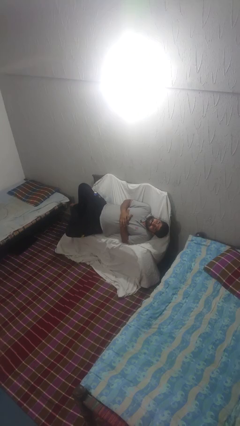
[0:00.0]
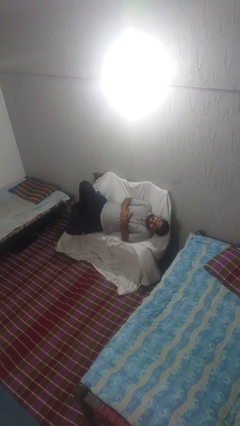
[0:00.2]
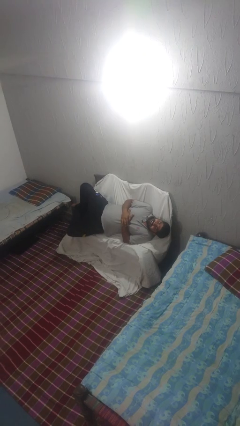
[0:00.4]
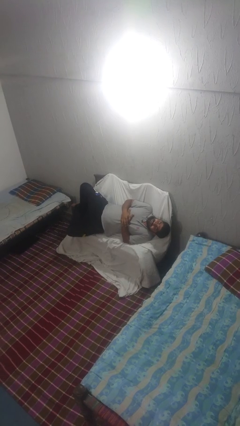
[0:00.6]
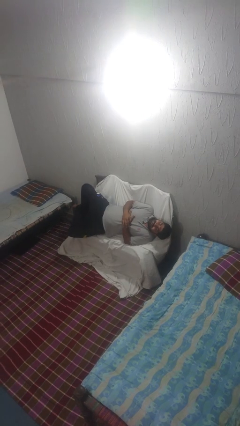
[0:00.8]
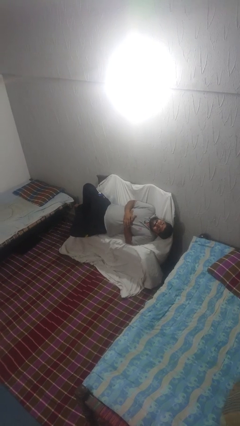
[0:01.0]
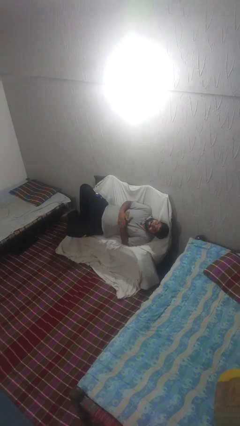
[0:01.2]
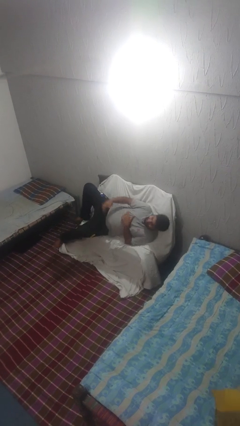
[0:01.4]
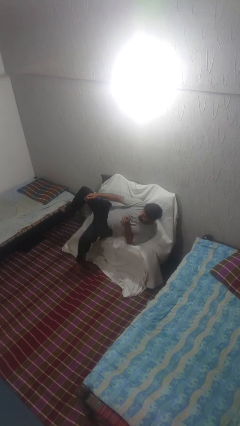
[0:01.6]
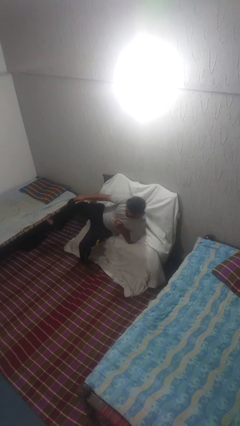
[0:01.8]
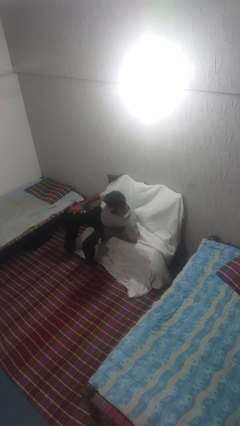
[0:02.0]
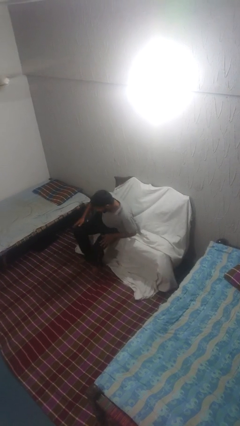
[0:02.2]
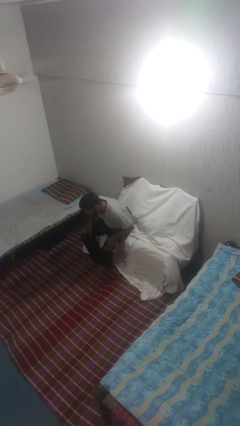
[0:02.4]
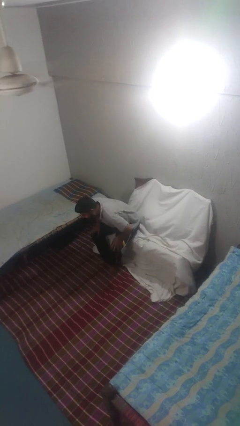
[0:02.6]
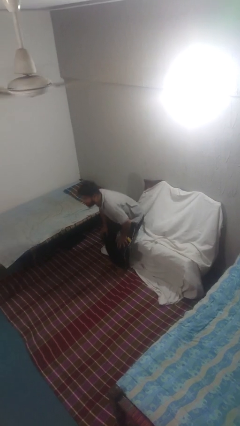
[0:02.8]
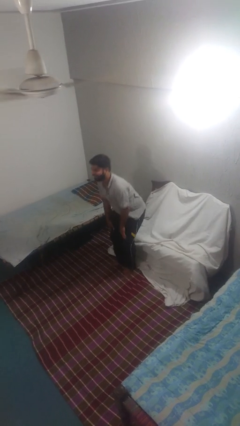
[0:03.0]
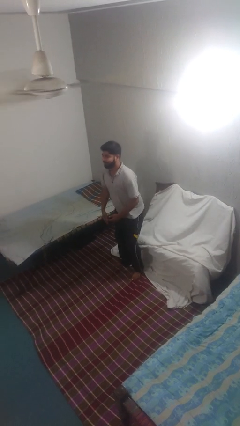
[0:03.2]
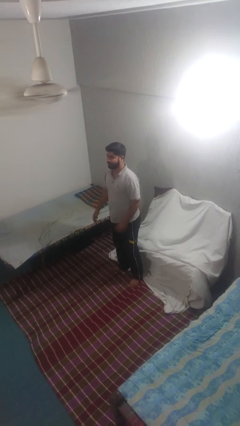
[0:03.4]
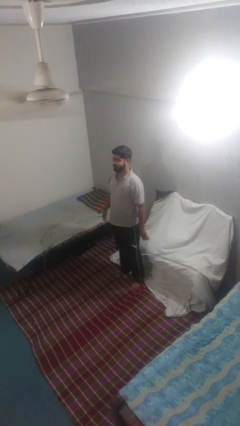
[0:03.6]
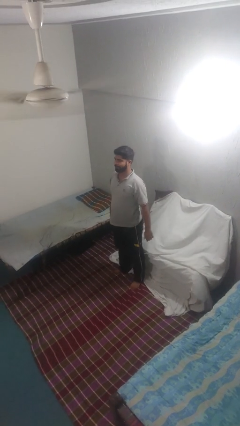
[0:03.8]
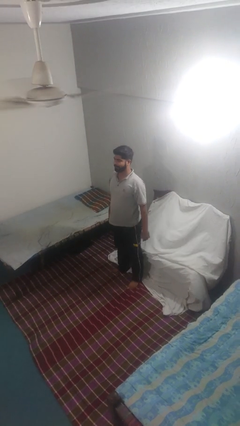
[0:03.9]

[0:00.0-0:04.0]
person stands up

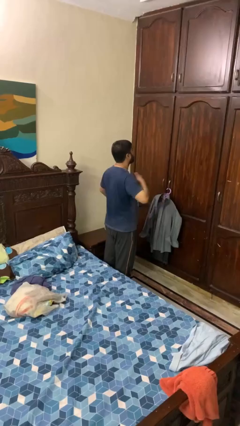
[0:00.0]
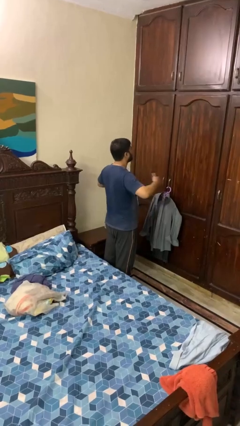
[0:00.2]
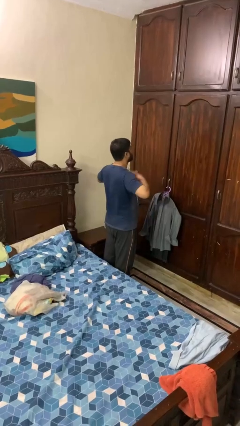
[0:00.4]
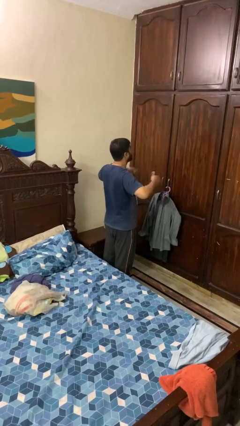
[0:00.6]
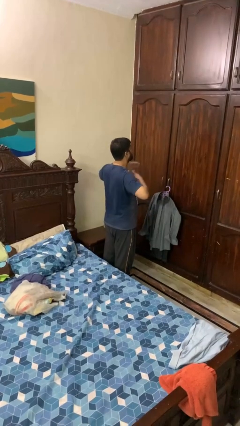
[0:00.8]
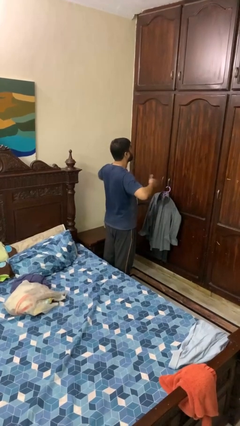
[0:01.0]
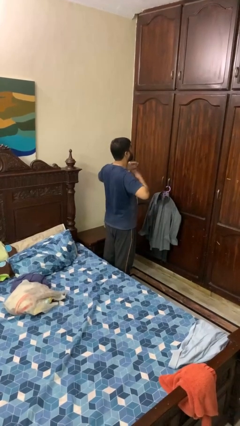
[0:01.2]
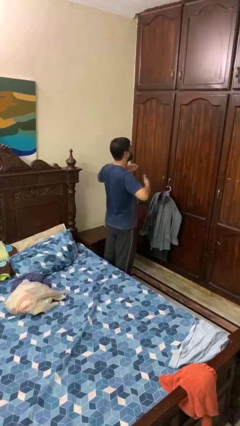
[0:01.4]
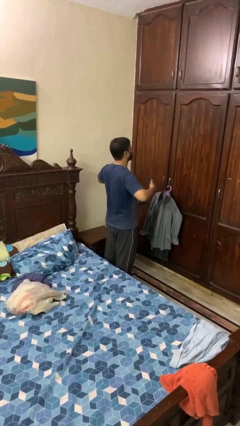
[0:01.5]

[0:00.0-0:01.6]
person drums on chest

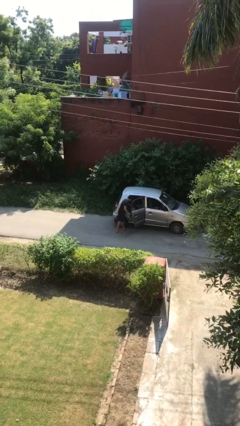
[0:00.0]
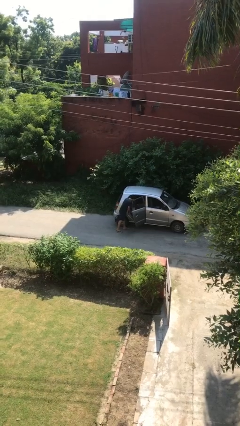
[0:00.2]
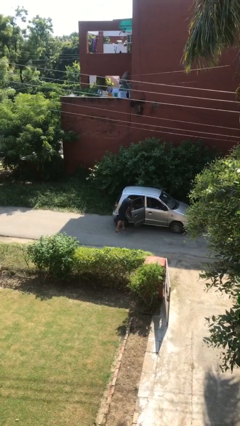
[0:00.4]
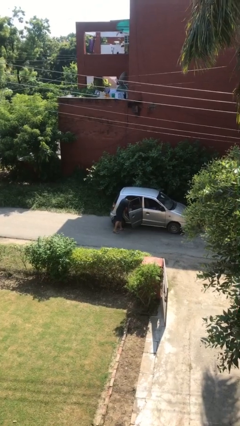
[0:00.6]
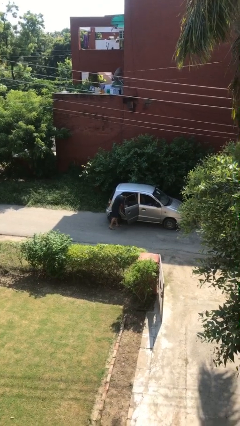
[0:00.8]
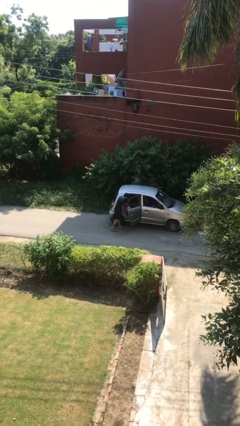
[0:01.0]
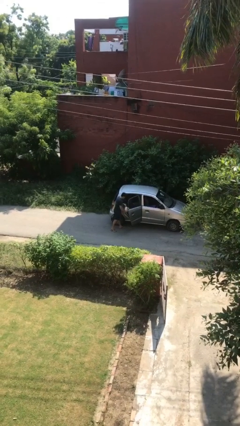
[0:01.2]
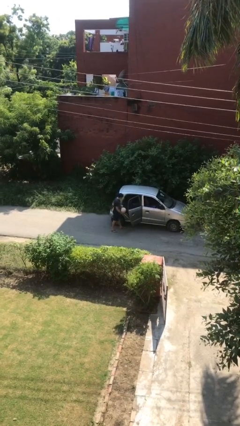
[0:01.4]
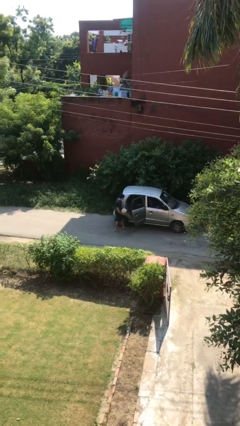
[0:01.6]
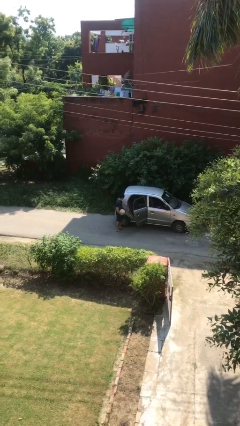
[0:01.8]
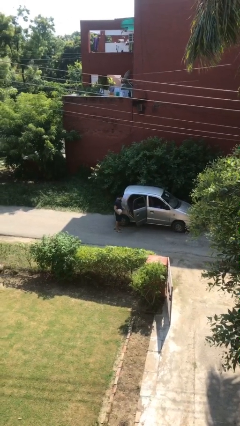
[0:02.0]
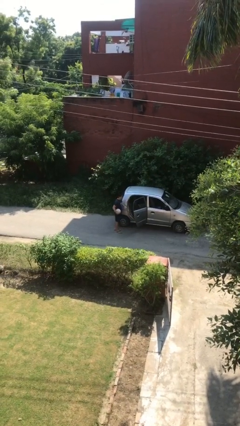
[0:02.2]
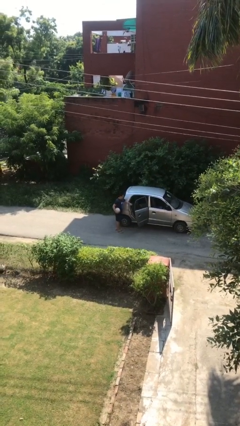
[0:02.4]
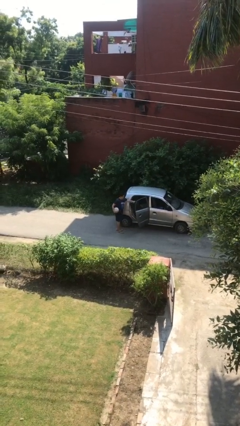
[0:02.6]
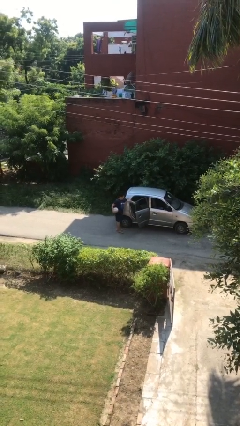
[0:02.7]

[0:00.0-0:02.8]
person unloads car

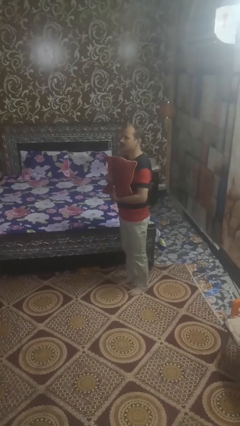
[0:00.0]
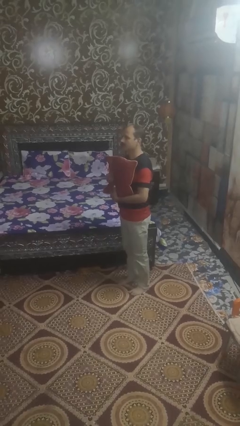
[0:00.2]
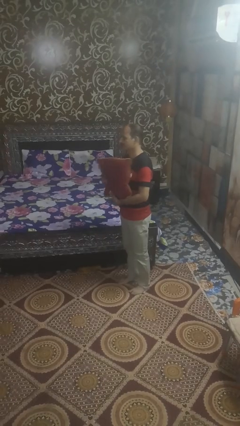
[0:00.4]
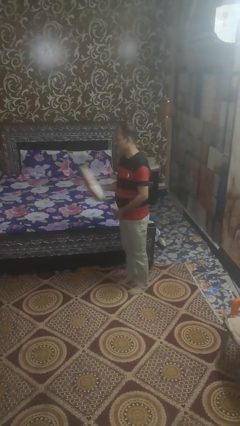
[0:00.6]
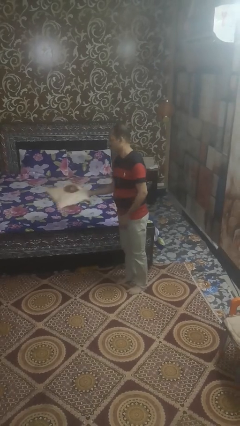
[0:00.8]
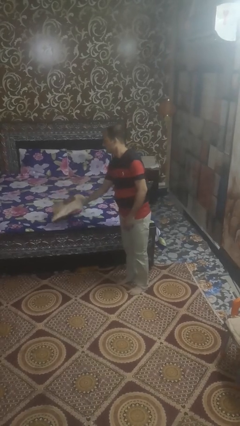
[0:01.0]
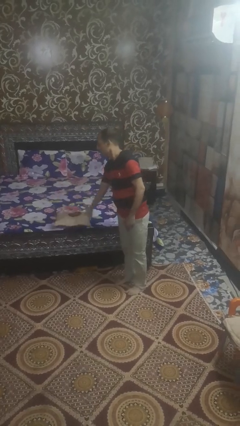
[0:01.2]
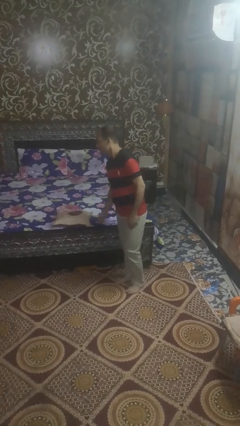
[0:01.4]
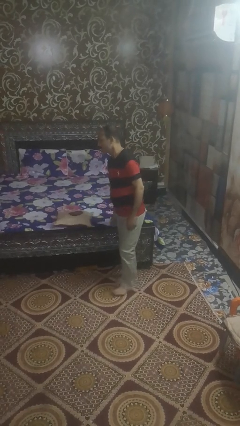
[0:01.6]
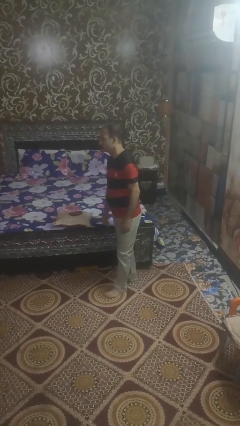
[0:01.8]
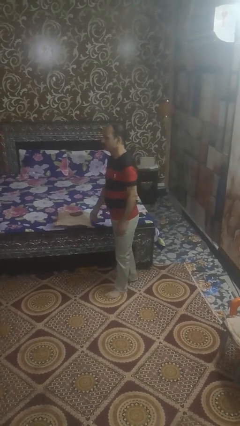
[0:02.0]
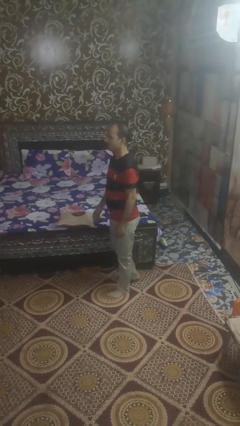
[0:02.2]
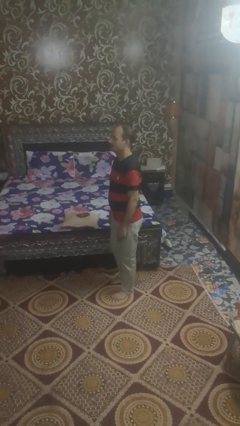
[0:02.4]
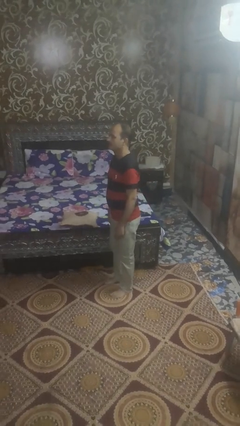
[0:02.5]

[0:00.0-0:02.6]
person puts down object on bed

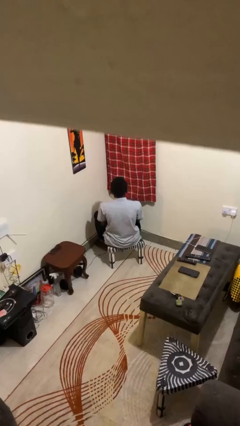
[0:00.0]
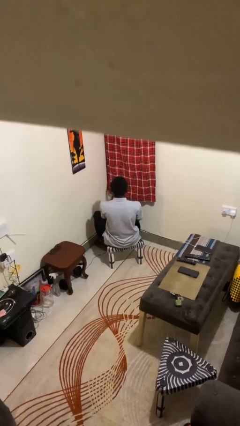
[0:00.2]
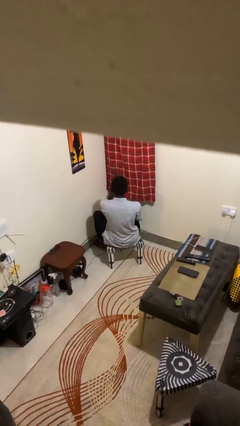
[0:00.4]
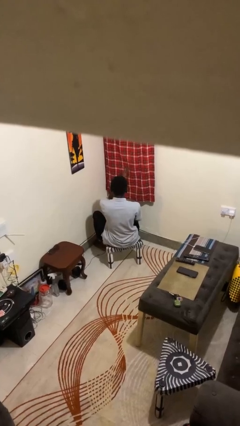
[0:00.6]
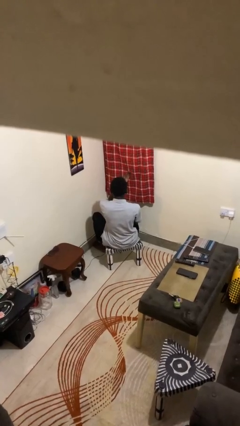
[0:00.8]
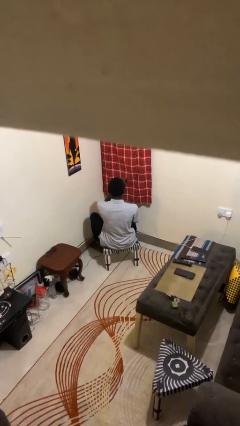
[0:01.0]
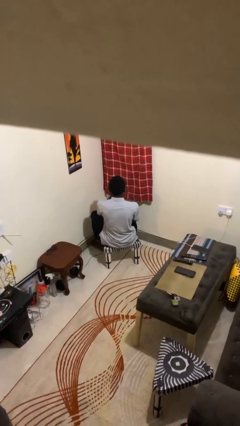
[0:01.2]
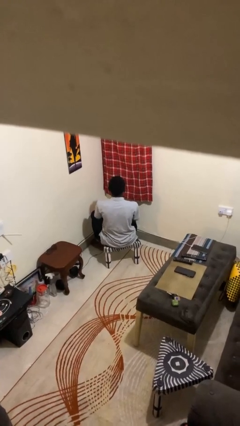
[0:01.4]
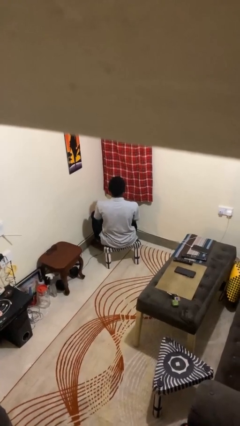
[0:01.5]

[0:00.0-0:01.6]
person gestures swipe right

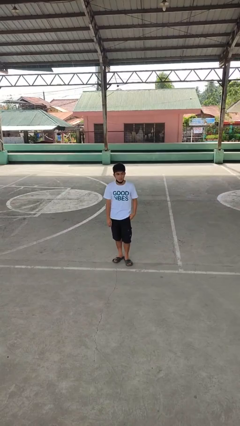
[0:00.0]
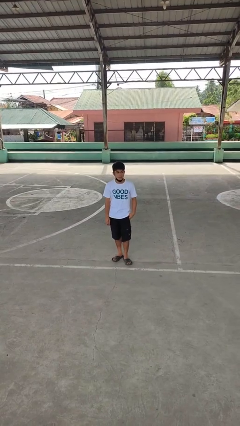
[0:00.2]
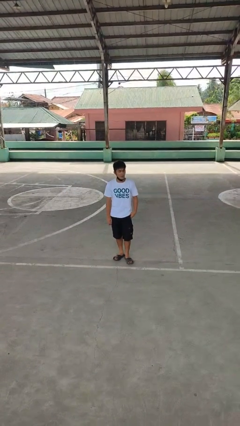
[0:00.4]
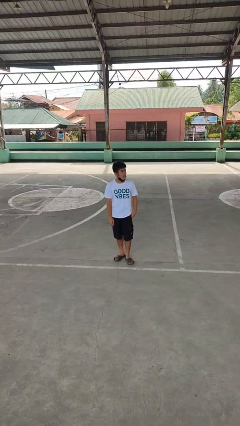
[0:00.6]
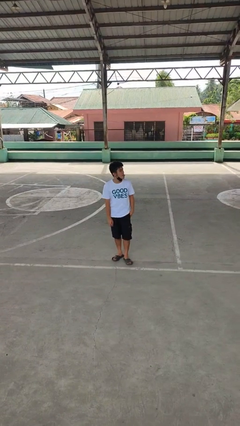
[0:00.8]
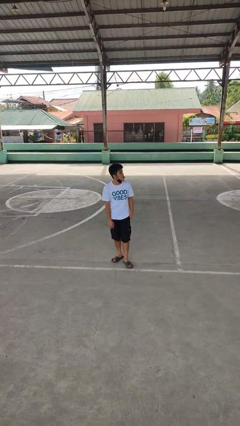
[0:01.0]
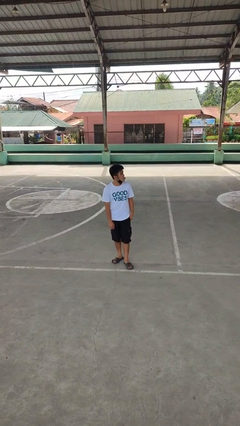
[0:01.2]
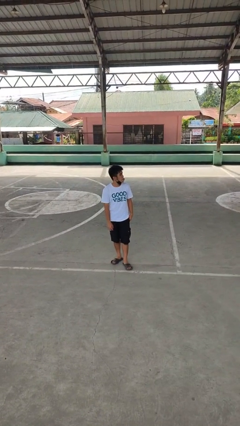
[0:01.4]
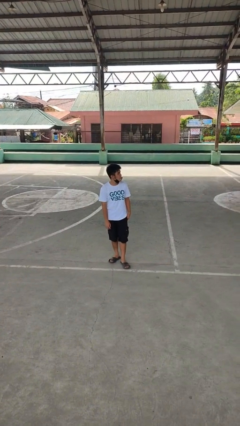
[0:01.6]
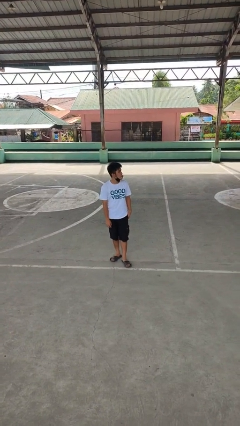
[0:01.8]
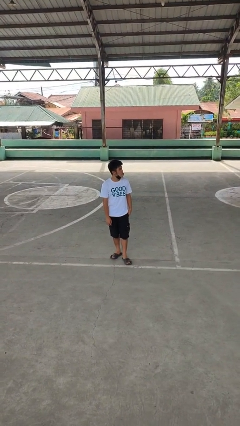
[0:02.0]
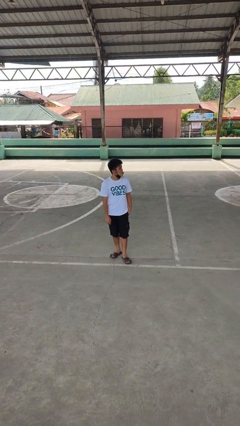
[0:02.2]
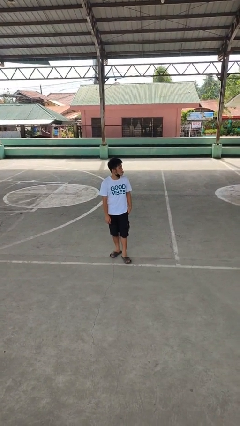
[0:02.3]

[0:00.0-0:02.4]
person sticks out tongue

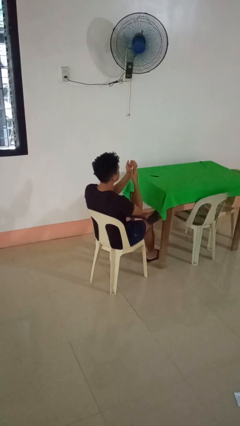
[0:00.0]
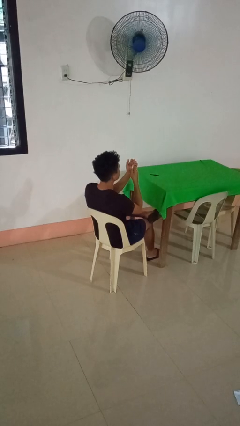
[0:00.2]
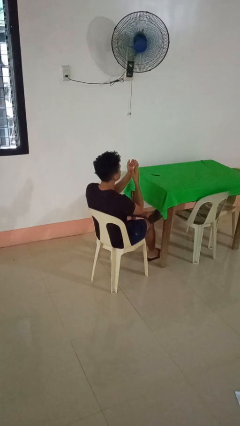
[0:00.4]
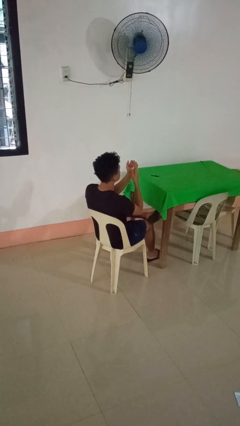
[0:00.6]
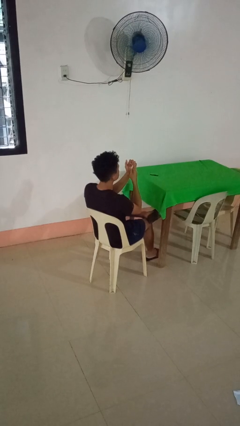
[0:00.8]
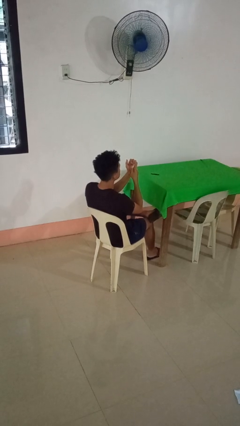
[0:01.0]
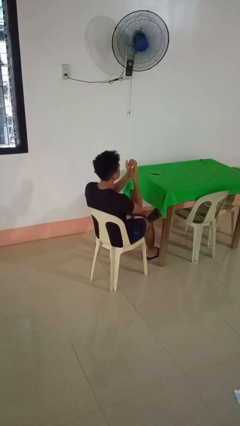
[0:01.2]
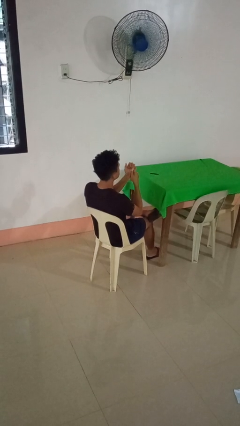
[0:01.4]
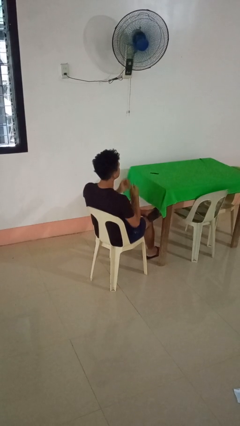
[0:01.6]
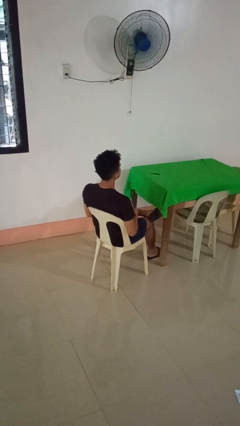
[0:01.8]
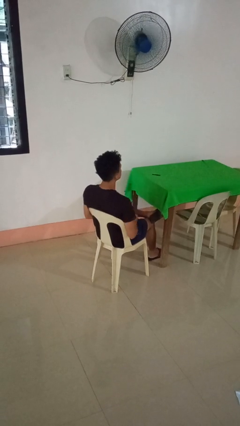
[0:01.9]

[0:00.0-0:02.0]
person clips fingernails
